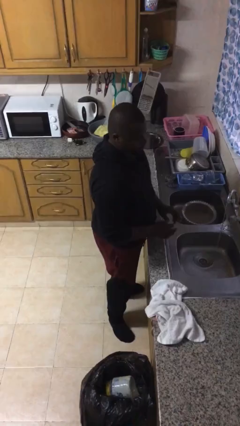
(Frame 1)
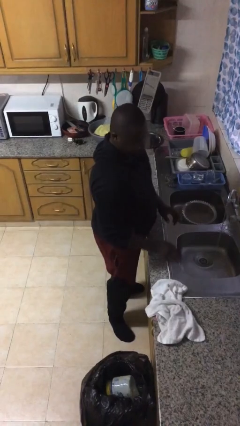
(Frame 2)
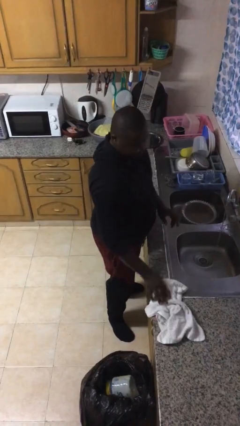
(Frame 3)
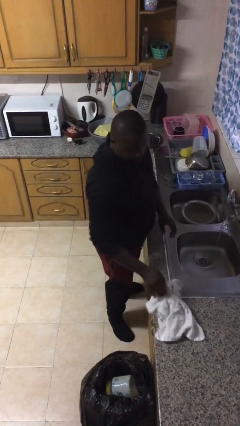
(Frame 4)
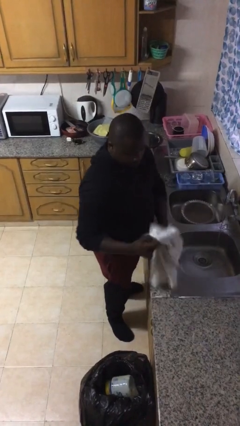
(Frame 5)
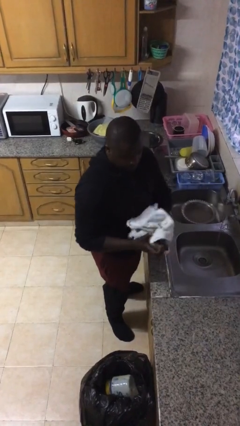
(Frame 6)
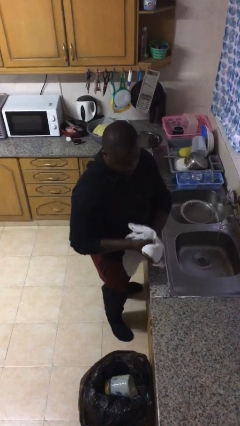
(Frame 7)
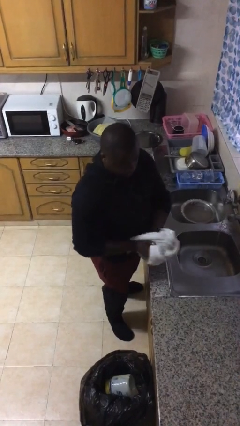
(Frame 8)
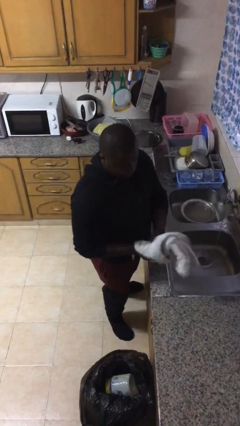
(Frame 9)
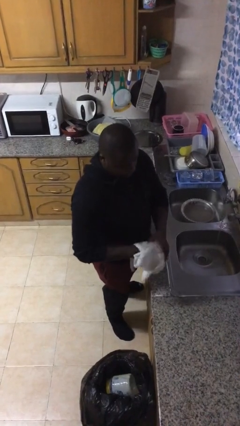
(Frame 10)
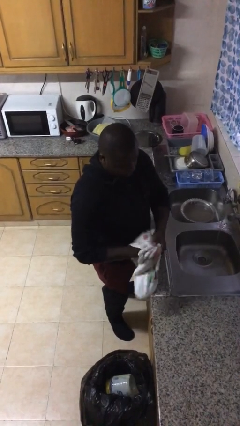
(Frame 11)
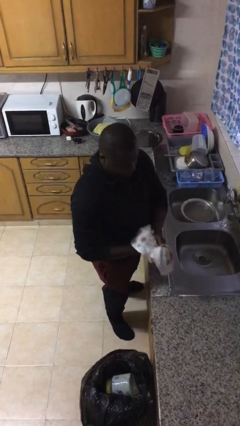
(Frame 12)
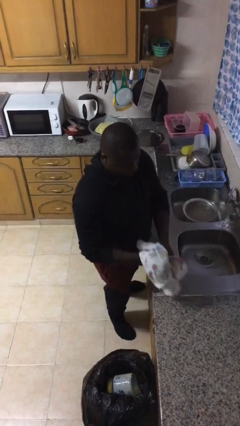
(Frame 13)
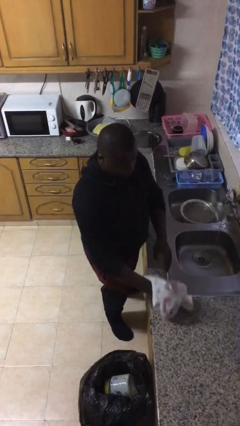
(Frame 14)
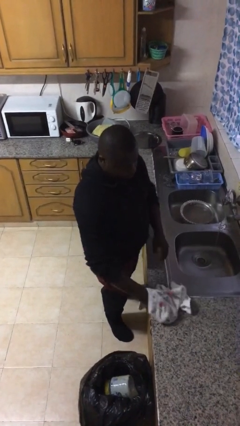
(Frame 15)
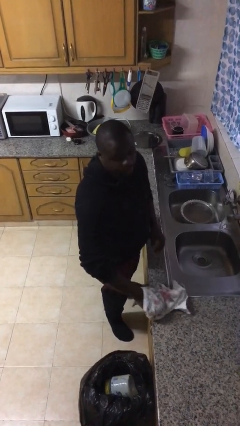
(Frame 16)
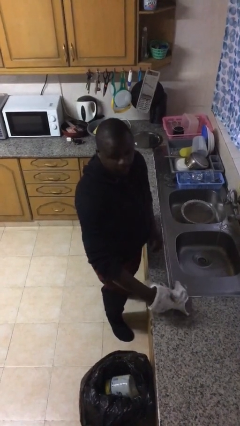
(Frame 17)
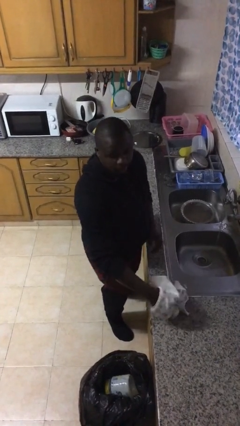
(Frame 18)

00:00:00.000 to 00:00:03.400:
person dries hands with towel

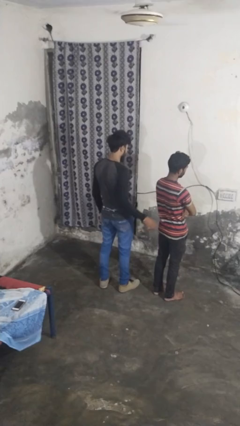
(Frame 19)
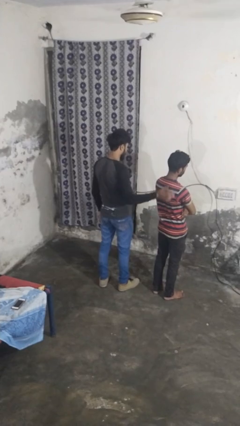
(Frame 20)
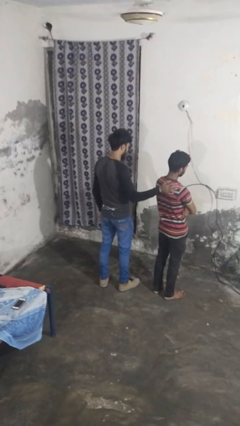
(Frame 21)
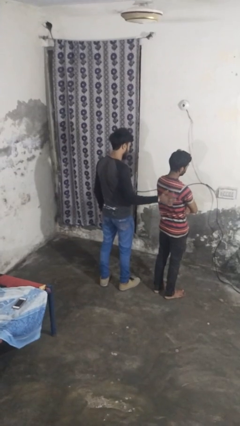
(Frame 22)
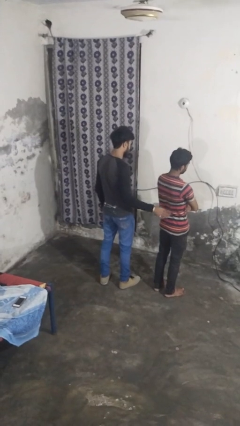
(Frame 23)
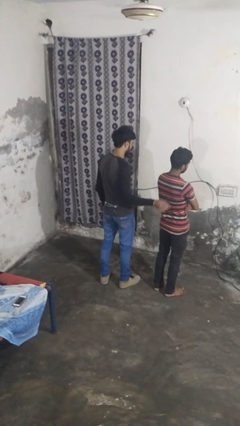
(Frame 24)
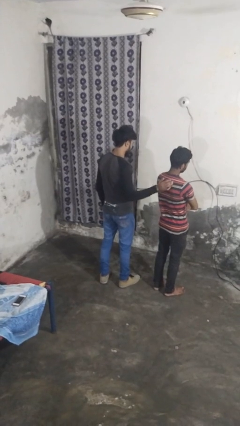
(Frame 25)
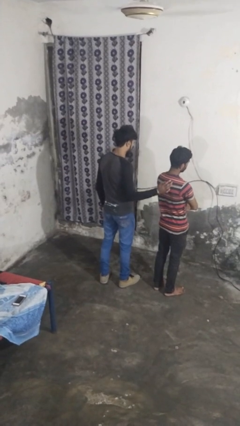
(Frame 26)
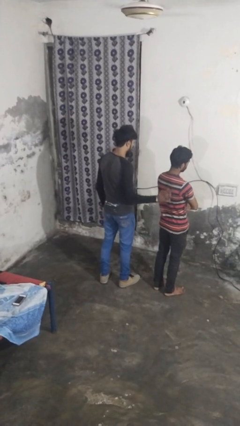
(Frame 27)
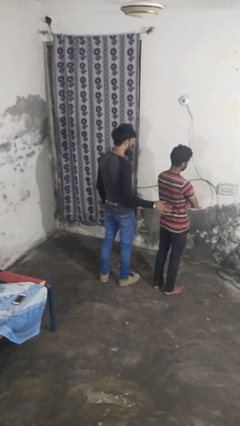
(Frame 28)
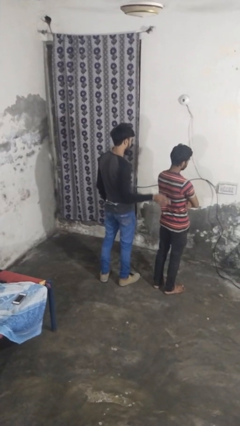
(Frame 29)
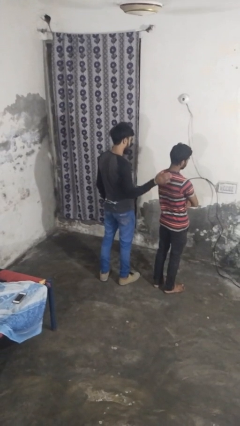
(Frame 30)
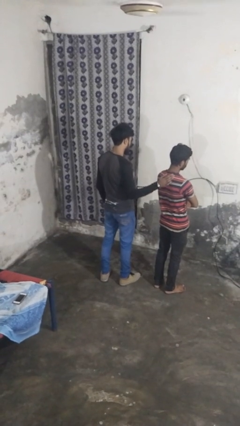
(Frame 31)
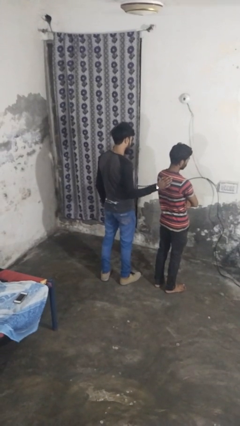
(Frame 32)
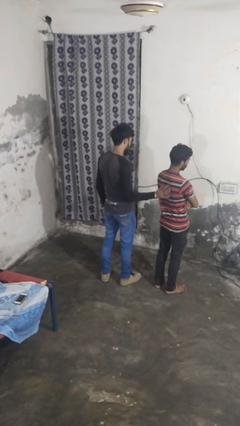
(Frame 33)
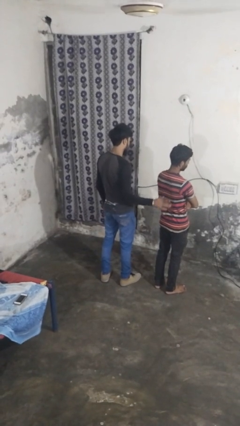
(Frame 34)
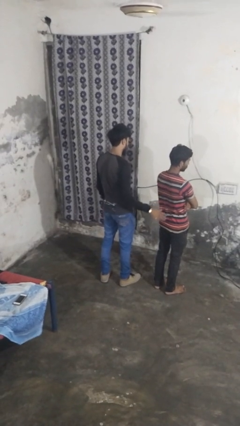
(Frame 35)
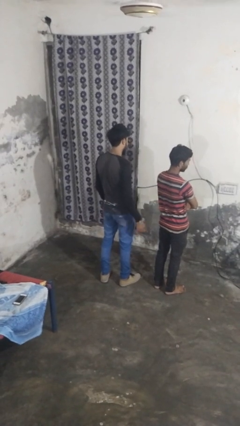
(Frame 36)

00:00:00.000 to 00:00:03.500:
person touches back of person

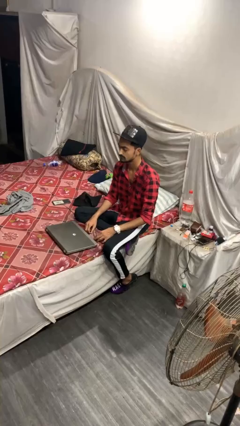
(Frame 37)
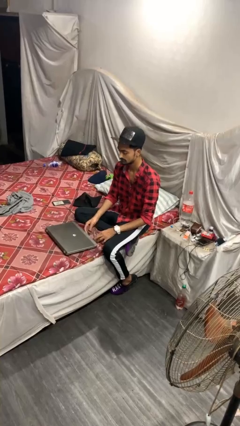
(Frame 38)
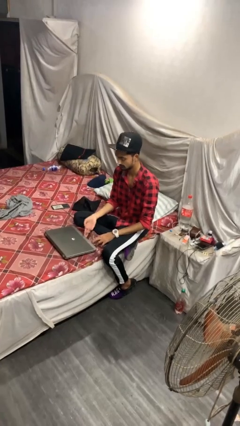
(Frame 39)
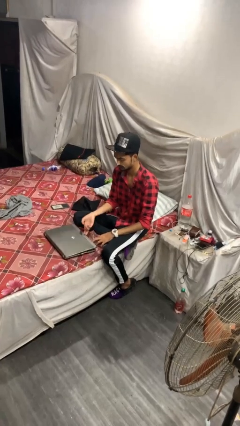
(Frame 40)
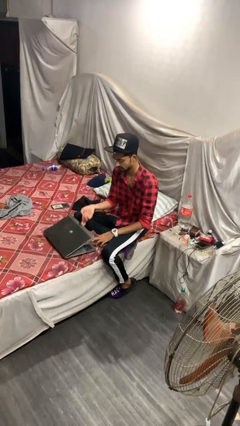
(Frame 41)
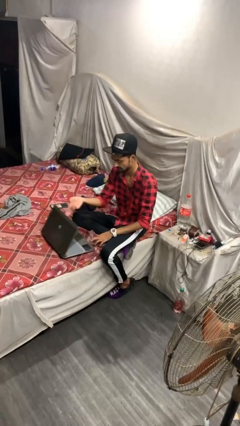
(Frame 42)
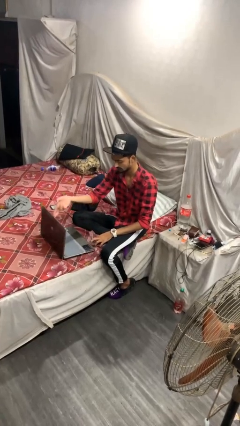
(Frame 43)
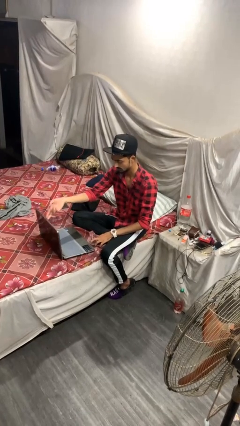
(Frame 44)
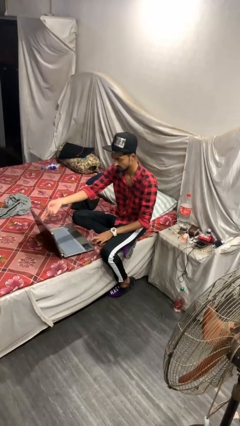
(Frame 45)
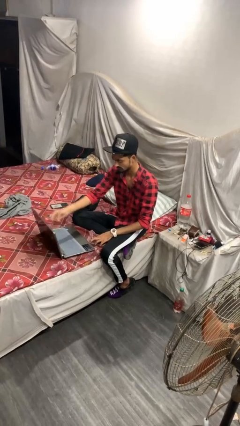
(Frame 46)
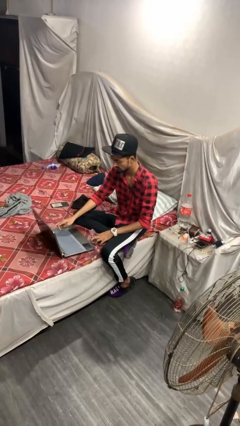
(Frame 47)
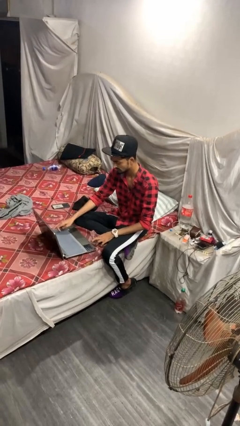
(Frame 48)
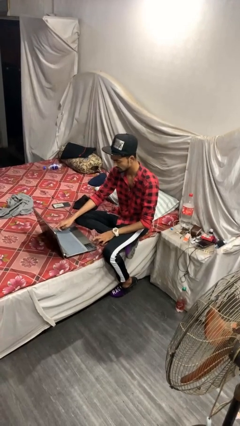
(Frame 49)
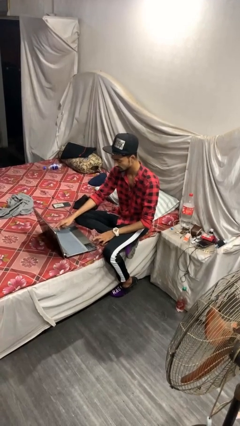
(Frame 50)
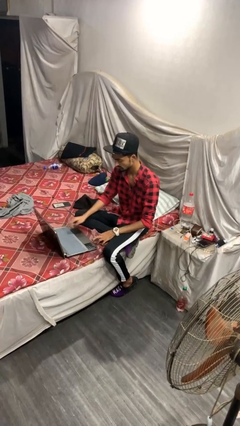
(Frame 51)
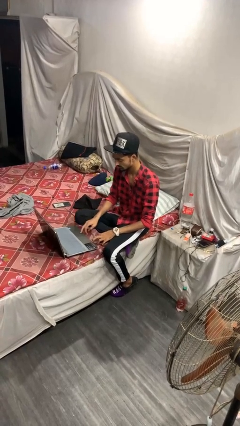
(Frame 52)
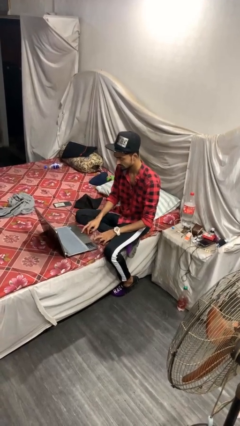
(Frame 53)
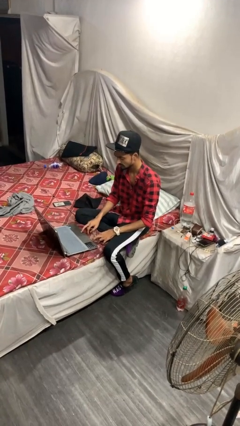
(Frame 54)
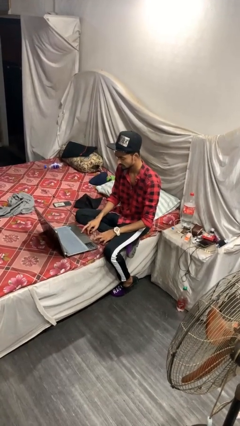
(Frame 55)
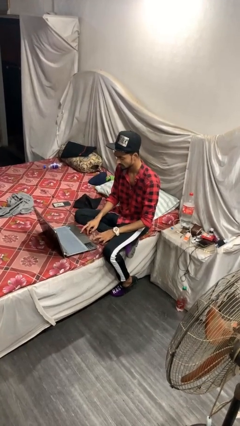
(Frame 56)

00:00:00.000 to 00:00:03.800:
person opens laptop

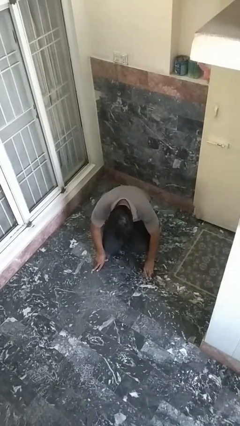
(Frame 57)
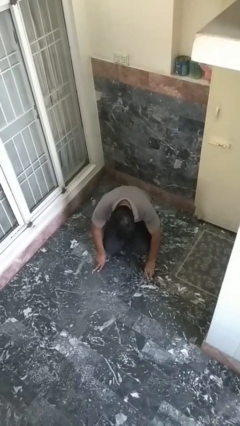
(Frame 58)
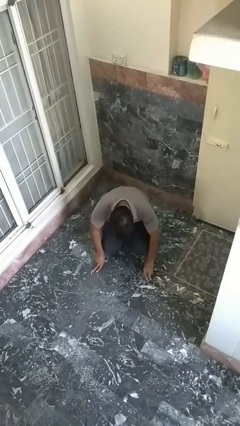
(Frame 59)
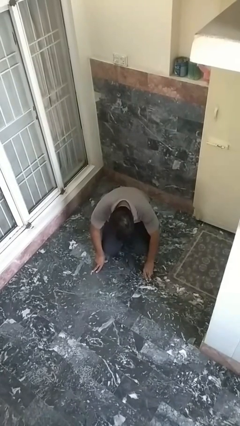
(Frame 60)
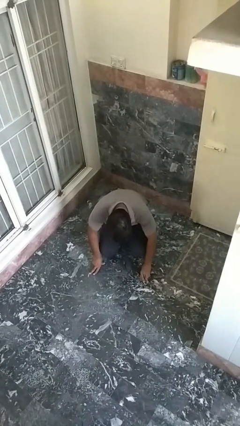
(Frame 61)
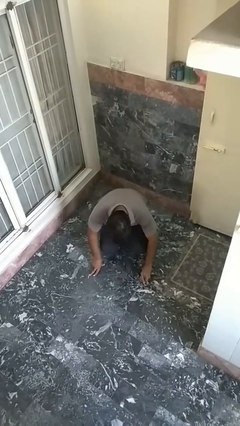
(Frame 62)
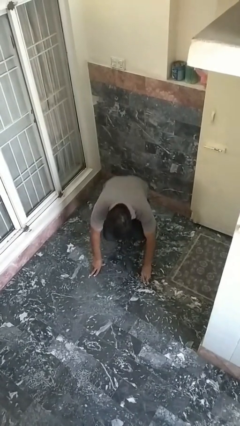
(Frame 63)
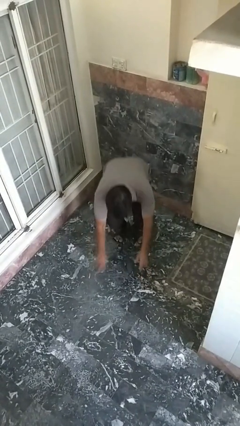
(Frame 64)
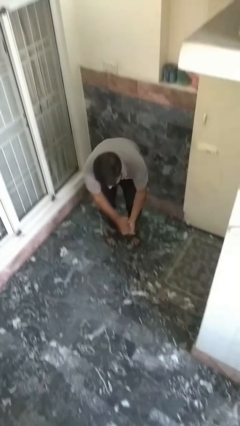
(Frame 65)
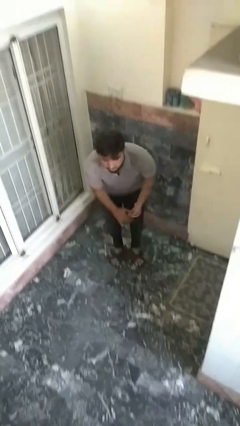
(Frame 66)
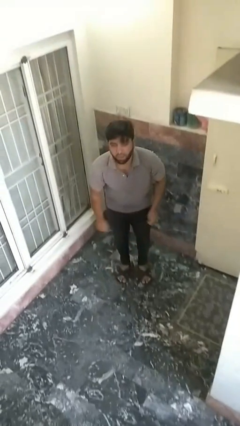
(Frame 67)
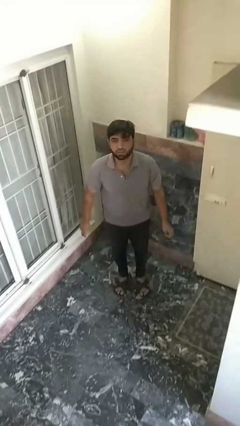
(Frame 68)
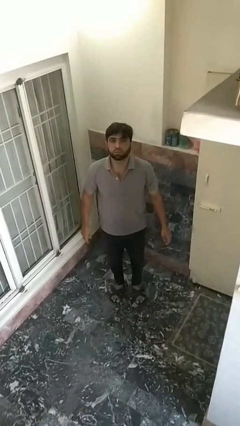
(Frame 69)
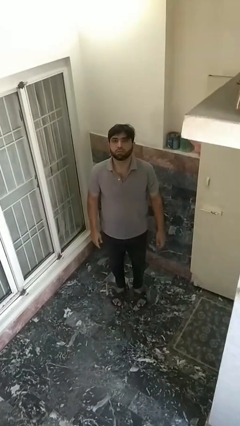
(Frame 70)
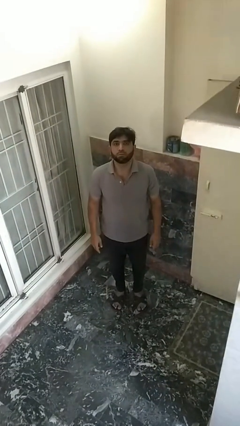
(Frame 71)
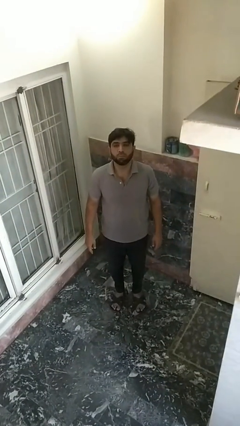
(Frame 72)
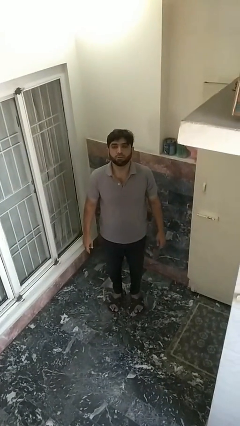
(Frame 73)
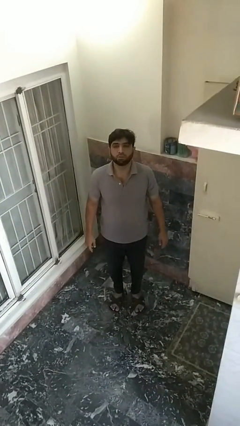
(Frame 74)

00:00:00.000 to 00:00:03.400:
person stands up from floor

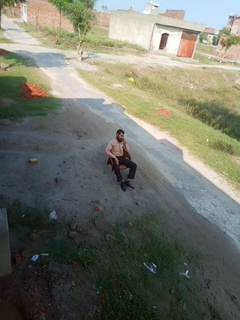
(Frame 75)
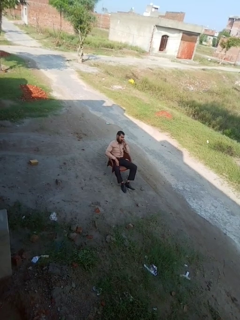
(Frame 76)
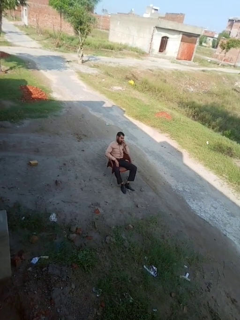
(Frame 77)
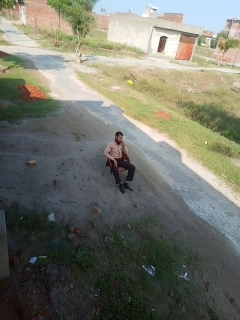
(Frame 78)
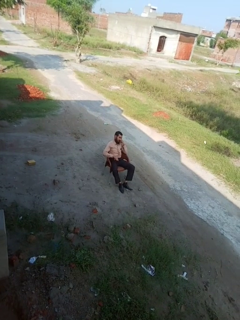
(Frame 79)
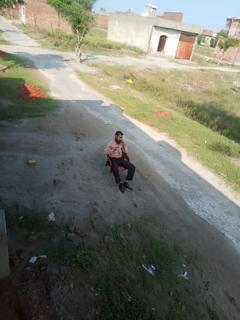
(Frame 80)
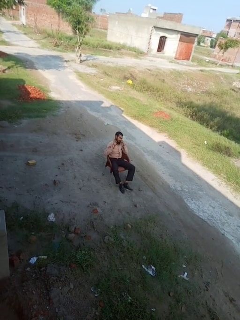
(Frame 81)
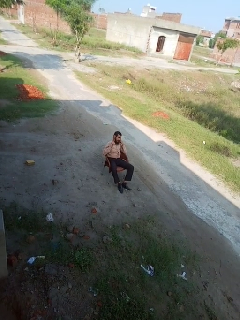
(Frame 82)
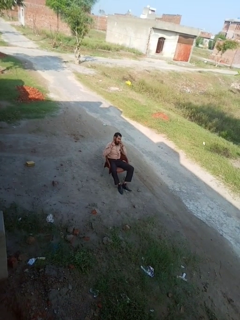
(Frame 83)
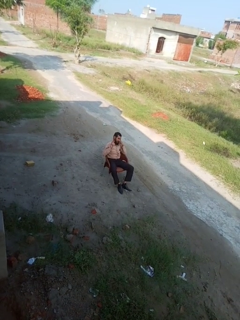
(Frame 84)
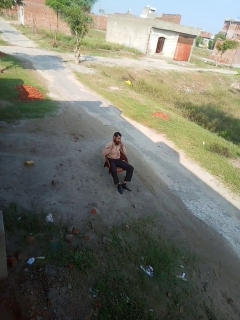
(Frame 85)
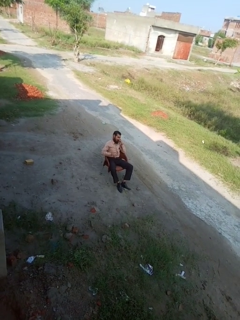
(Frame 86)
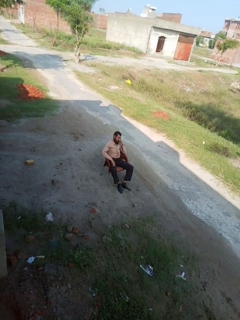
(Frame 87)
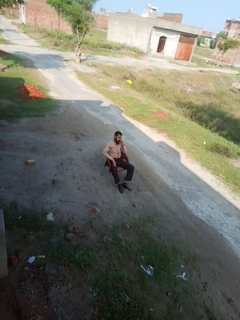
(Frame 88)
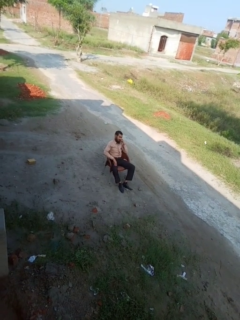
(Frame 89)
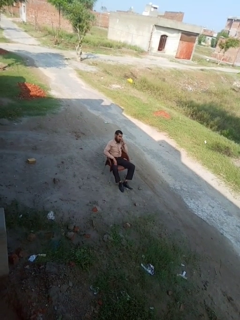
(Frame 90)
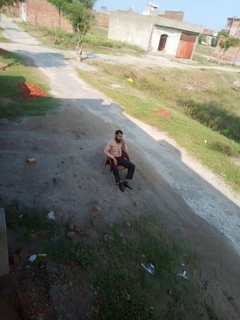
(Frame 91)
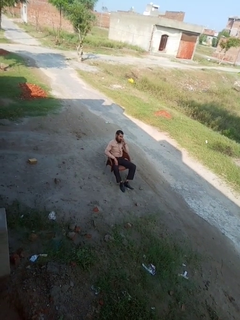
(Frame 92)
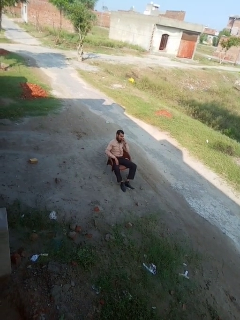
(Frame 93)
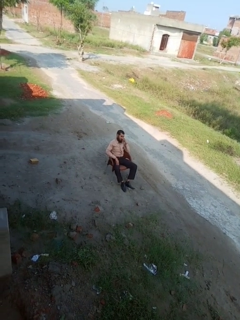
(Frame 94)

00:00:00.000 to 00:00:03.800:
person gestures number three

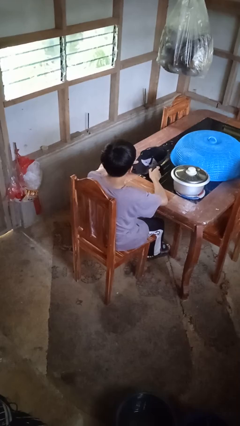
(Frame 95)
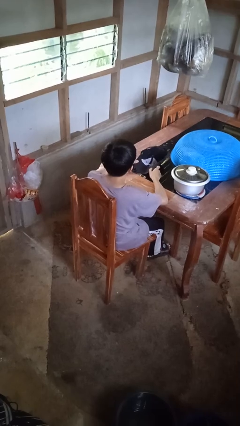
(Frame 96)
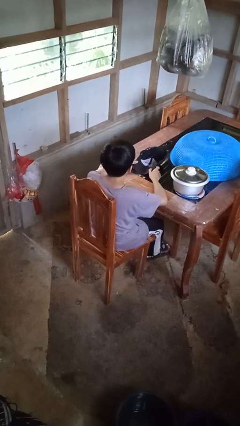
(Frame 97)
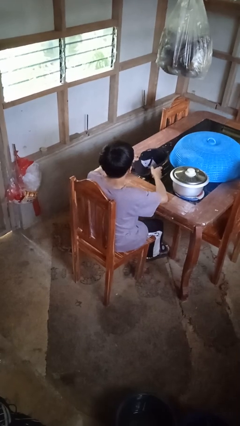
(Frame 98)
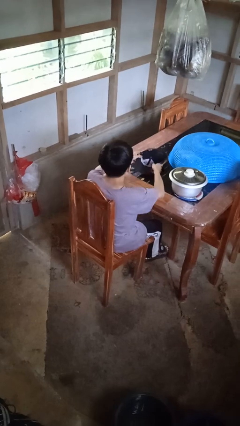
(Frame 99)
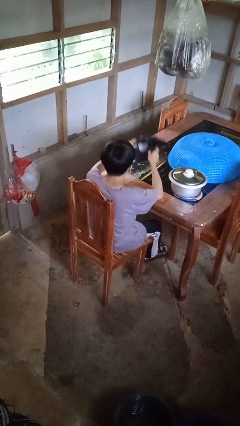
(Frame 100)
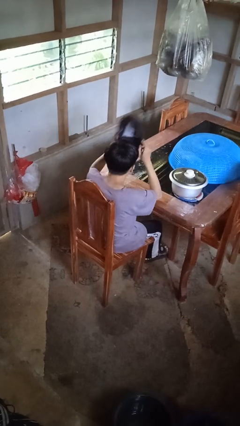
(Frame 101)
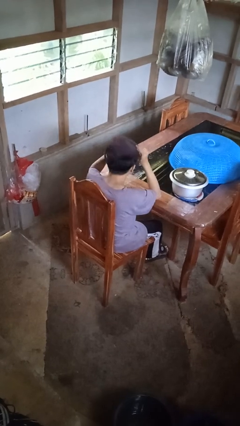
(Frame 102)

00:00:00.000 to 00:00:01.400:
person puts on hat
